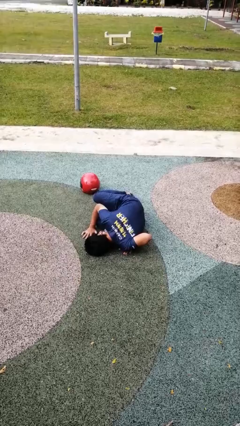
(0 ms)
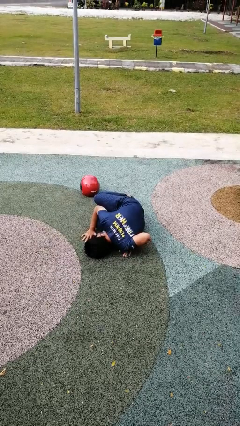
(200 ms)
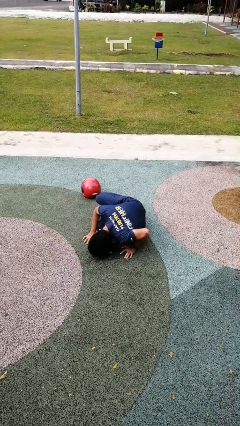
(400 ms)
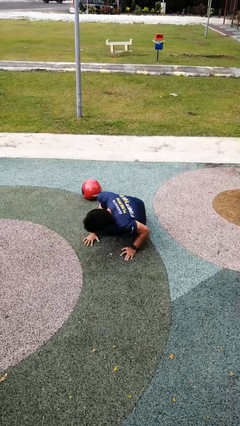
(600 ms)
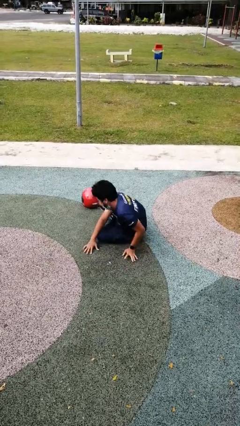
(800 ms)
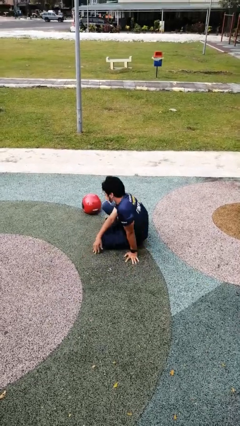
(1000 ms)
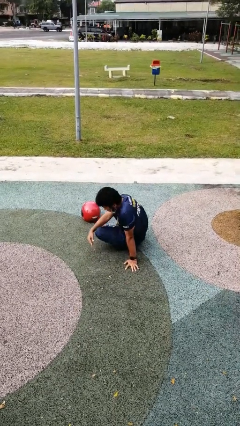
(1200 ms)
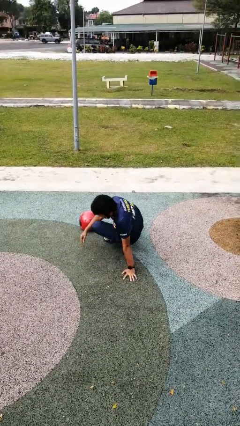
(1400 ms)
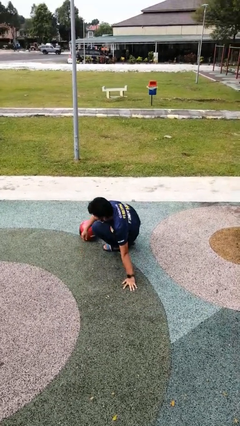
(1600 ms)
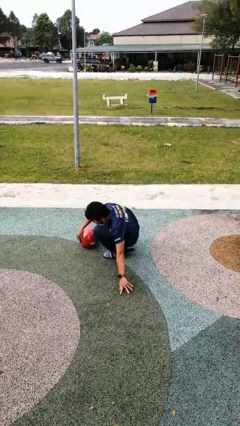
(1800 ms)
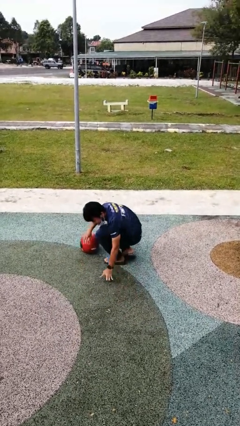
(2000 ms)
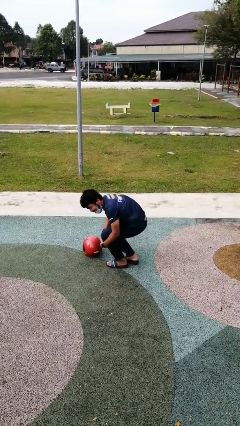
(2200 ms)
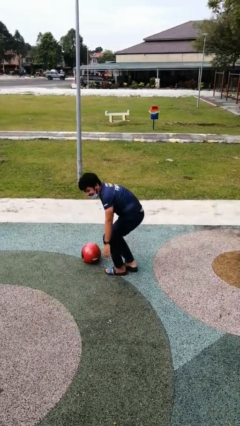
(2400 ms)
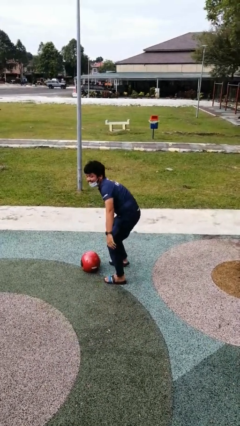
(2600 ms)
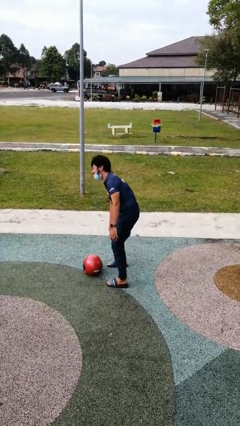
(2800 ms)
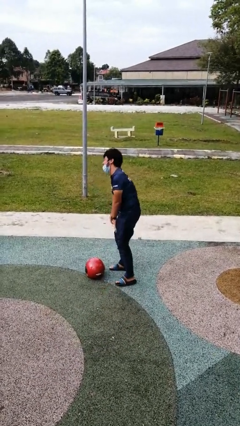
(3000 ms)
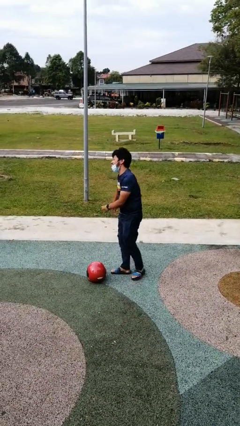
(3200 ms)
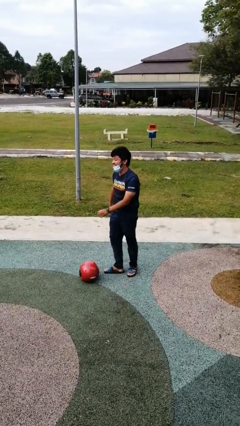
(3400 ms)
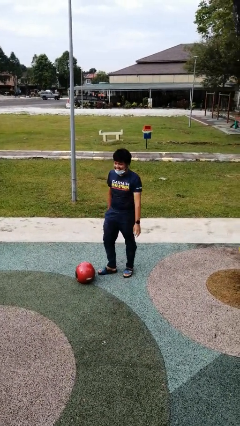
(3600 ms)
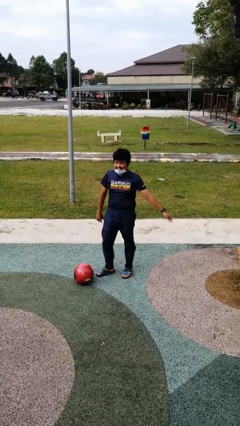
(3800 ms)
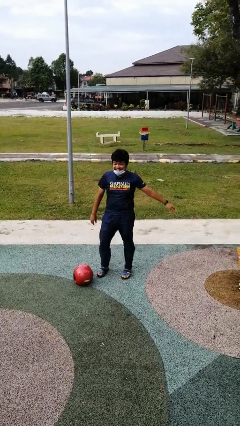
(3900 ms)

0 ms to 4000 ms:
person stands up from floor

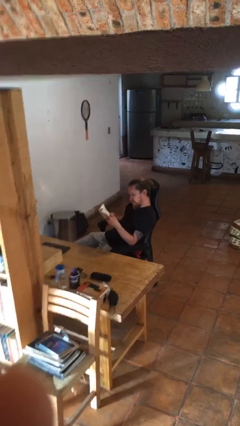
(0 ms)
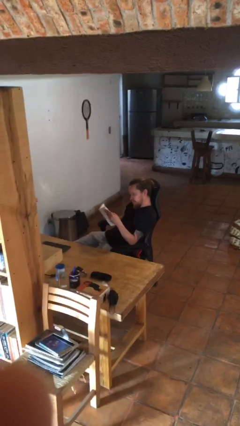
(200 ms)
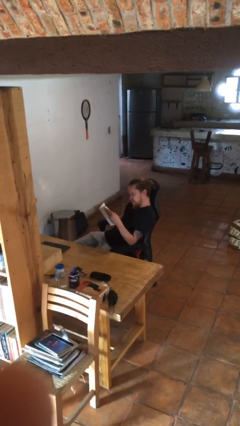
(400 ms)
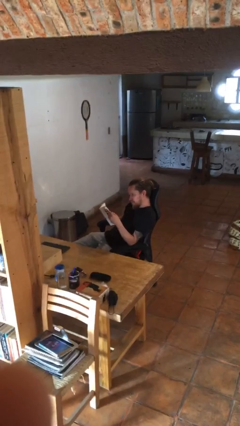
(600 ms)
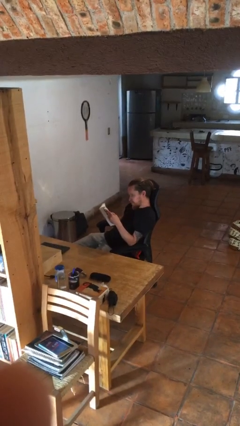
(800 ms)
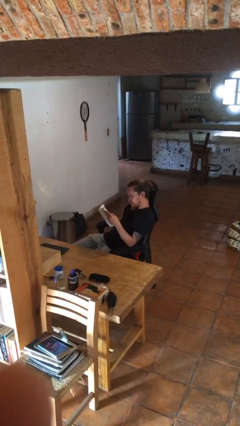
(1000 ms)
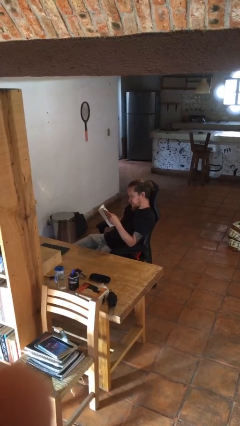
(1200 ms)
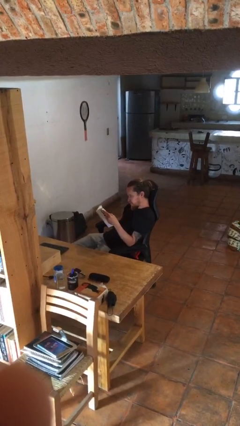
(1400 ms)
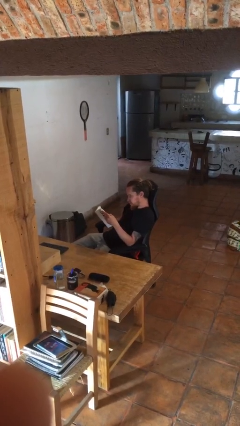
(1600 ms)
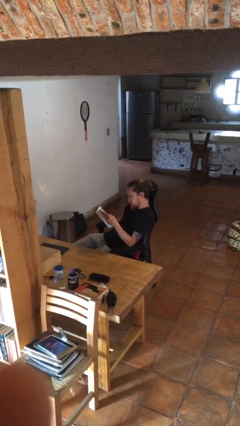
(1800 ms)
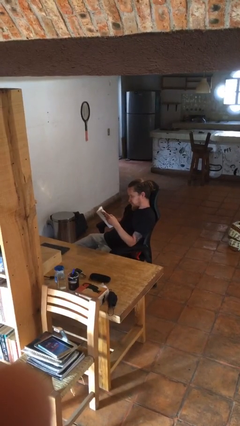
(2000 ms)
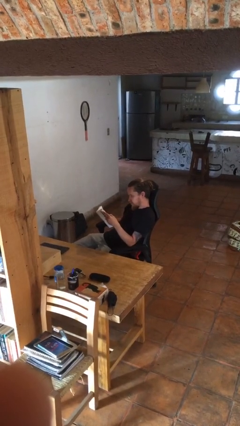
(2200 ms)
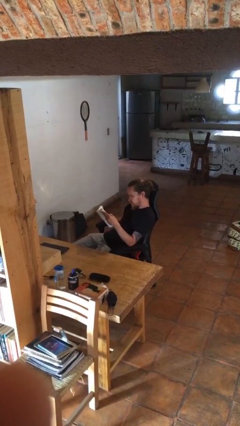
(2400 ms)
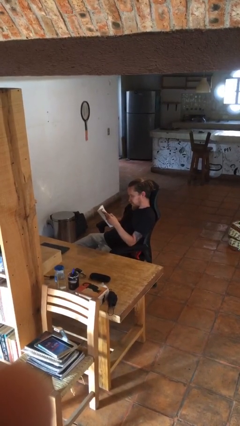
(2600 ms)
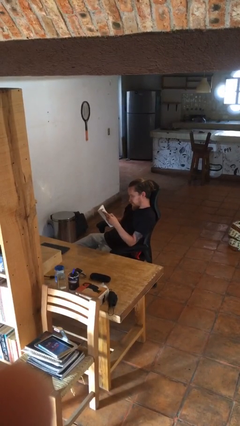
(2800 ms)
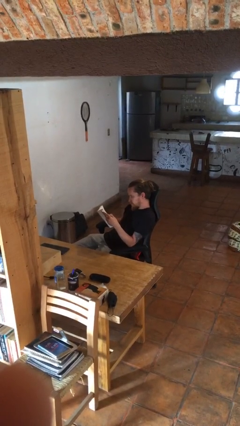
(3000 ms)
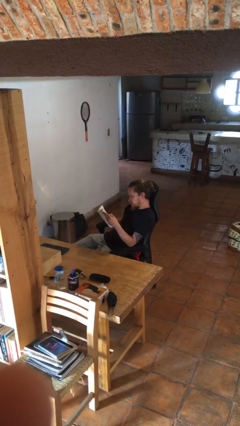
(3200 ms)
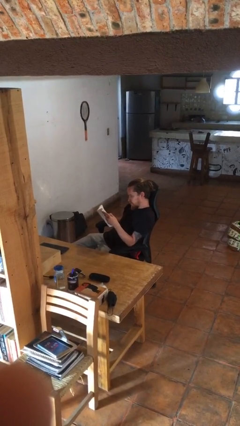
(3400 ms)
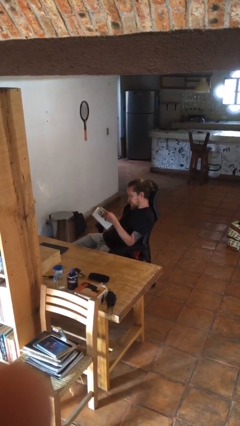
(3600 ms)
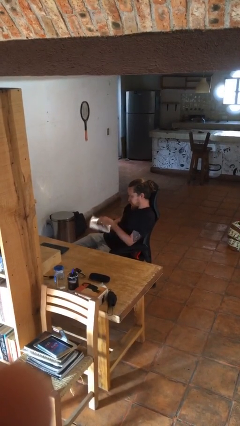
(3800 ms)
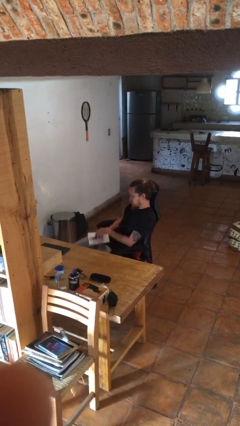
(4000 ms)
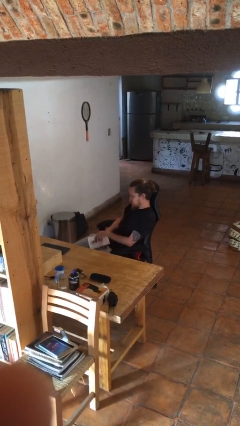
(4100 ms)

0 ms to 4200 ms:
person reads book

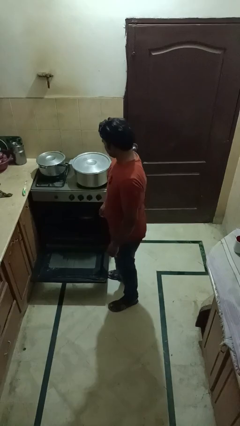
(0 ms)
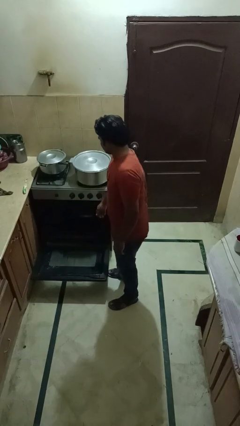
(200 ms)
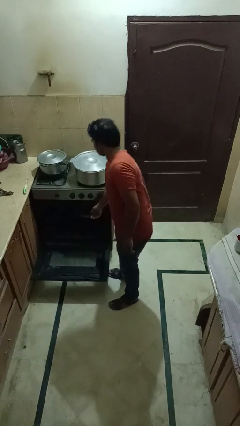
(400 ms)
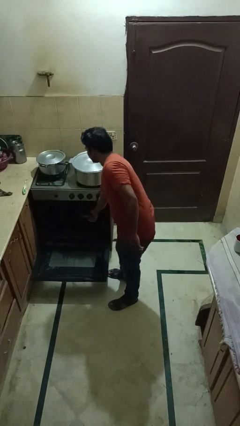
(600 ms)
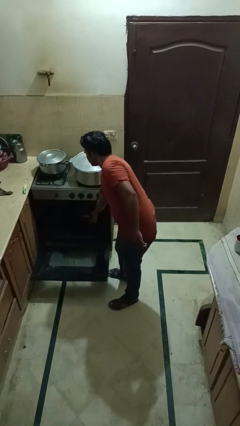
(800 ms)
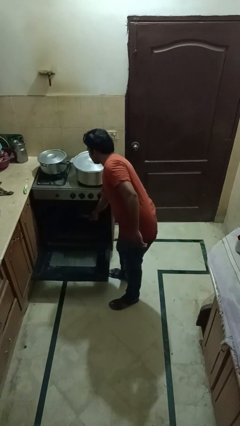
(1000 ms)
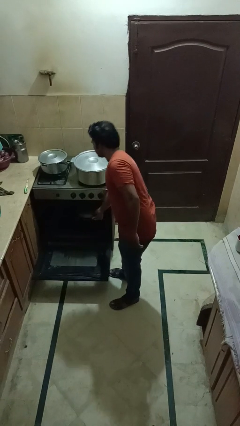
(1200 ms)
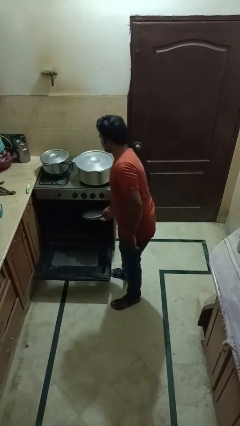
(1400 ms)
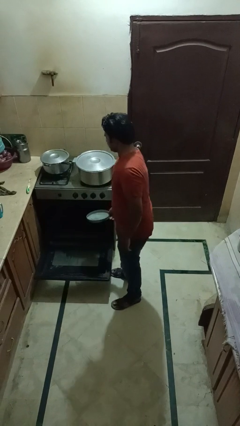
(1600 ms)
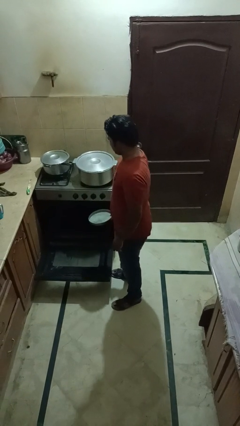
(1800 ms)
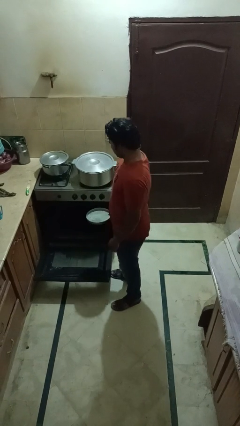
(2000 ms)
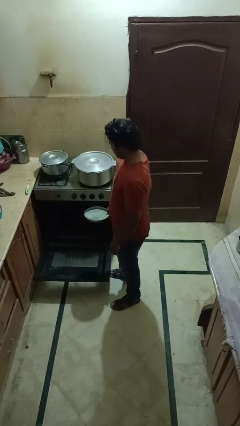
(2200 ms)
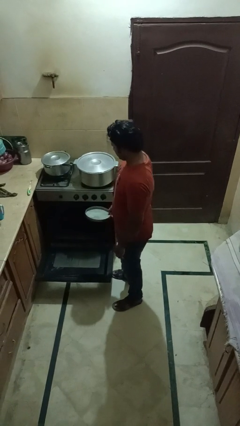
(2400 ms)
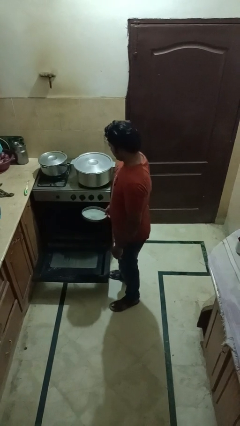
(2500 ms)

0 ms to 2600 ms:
person takes object from oven

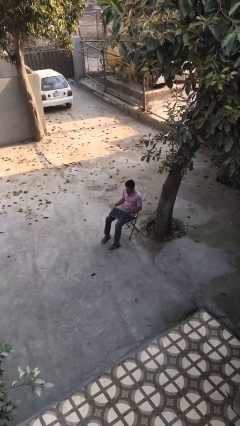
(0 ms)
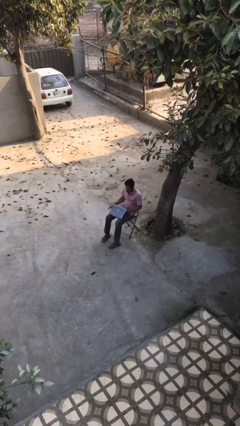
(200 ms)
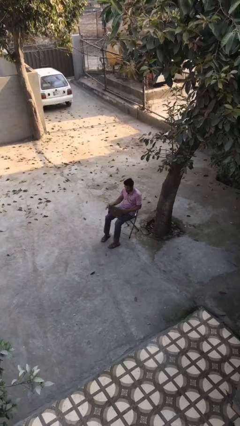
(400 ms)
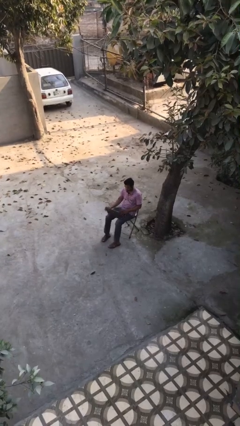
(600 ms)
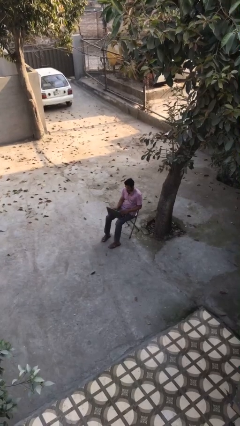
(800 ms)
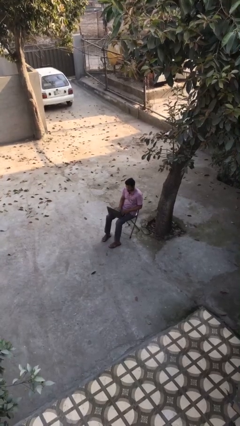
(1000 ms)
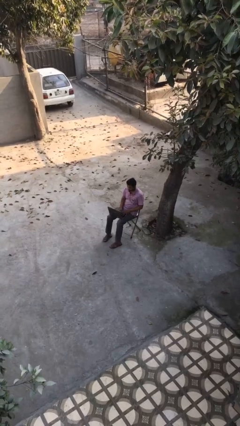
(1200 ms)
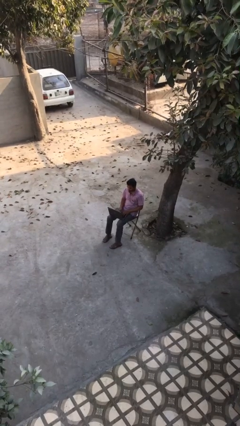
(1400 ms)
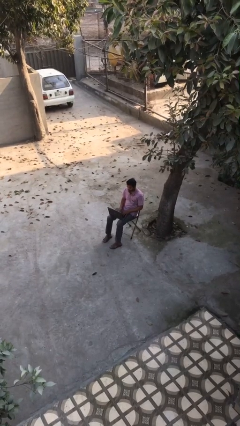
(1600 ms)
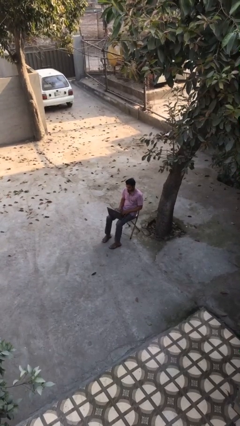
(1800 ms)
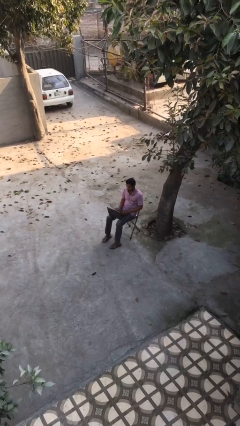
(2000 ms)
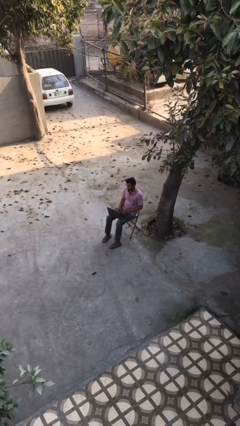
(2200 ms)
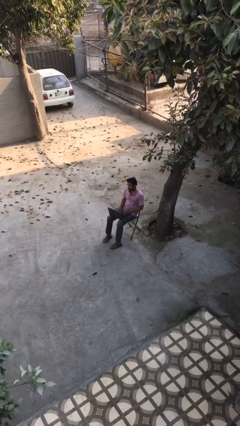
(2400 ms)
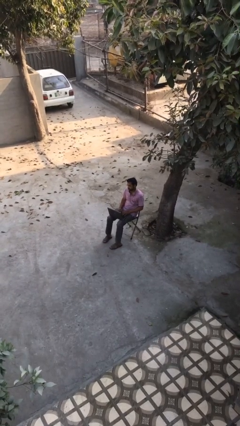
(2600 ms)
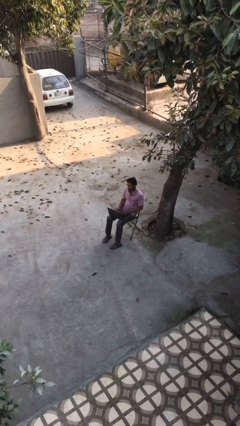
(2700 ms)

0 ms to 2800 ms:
person interacts with laptop

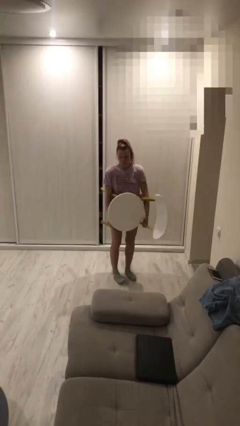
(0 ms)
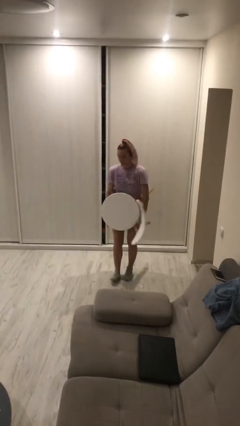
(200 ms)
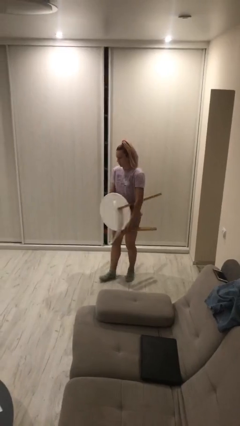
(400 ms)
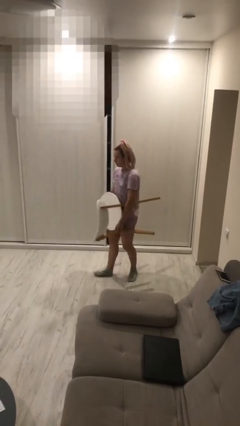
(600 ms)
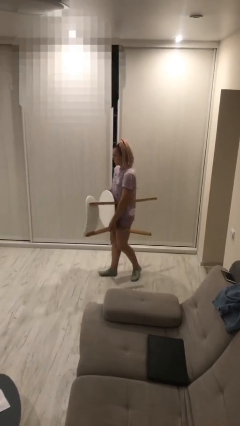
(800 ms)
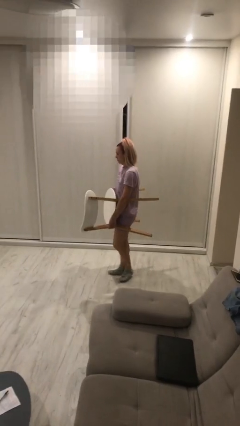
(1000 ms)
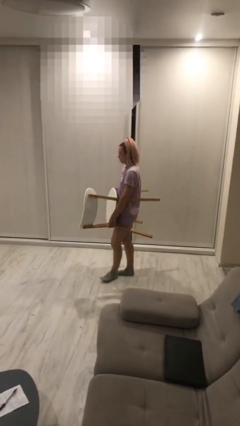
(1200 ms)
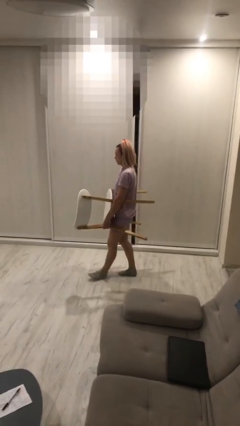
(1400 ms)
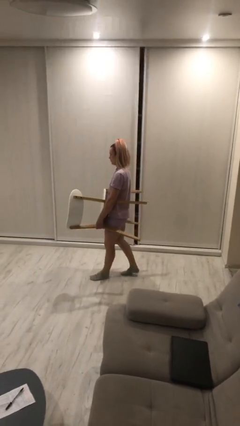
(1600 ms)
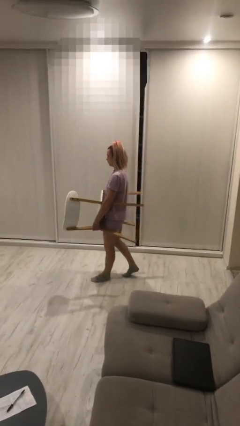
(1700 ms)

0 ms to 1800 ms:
person carries furniture

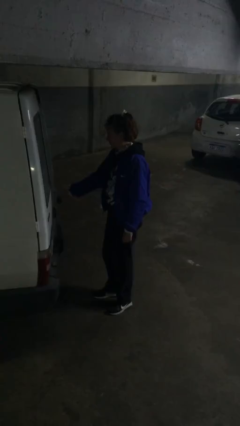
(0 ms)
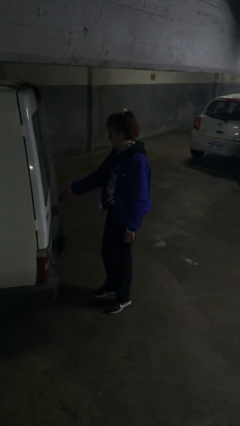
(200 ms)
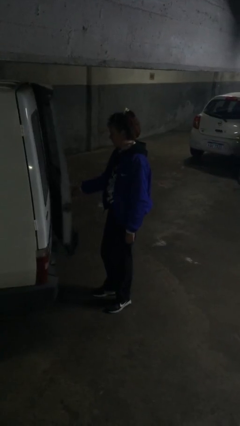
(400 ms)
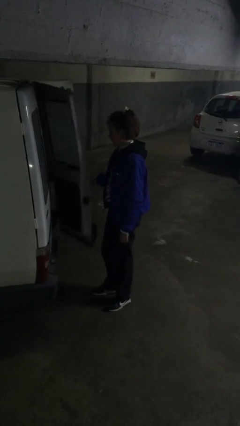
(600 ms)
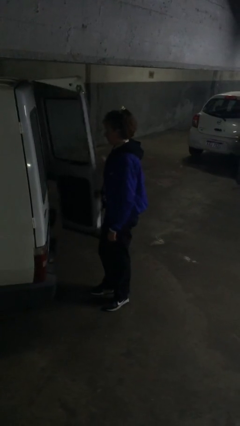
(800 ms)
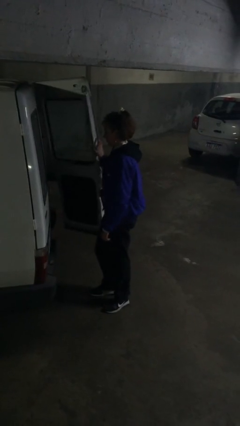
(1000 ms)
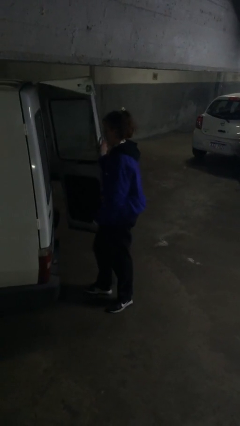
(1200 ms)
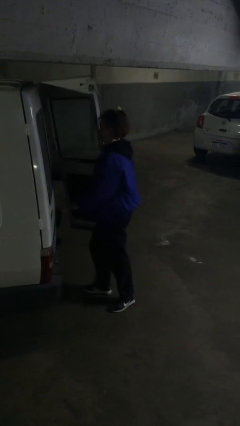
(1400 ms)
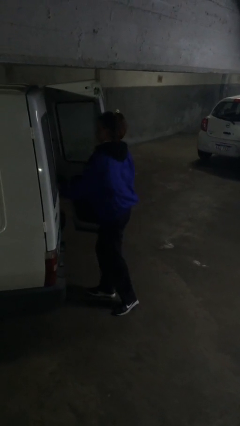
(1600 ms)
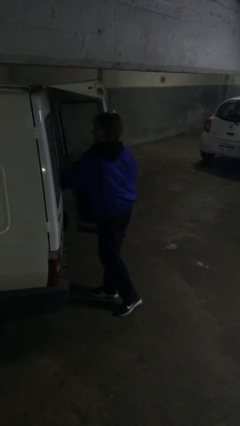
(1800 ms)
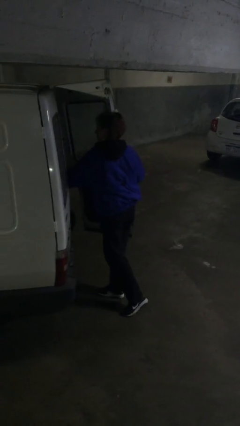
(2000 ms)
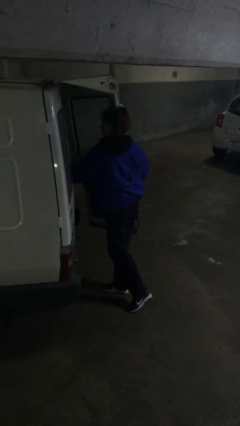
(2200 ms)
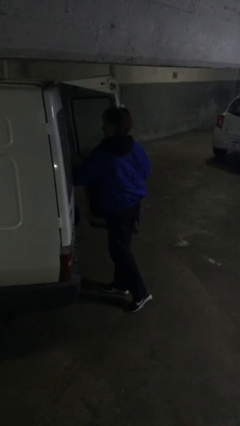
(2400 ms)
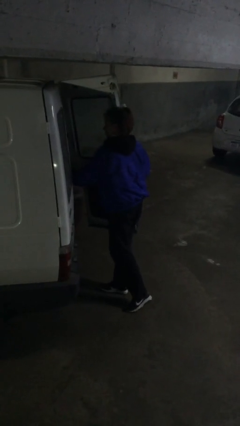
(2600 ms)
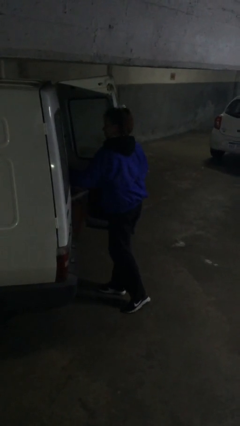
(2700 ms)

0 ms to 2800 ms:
person opens car door
